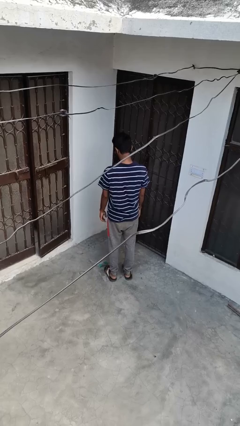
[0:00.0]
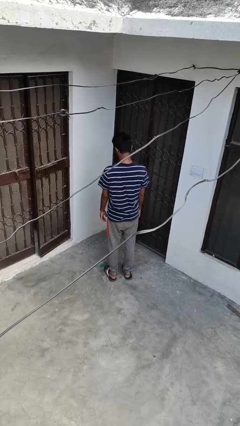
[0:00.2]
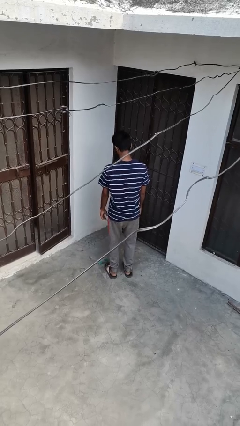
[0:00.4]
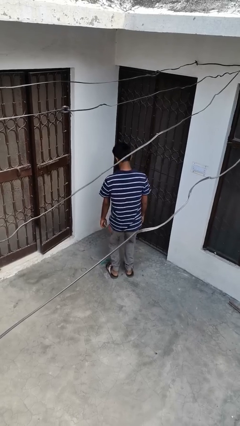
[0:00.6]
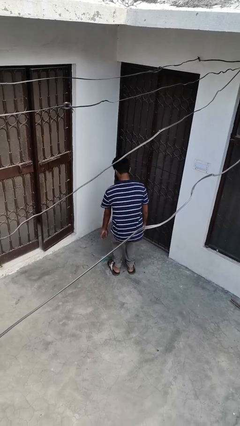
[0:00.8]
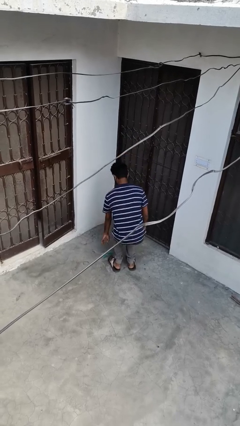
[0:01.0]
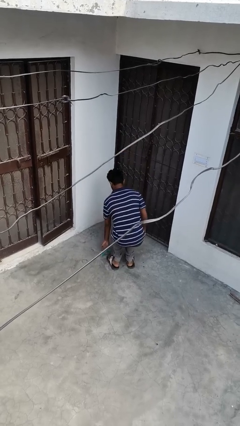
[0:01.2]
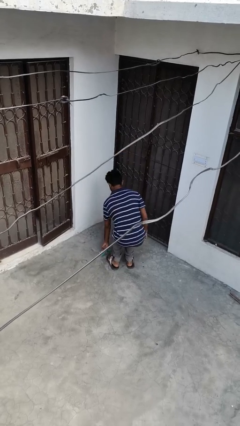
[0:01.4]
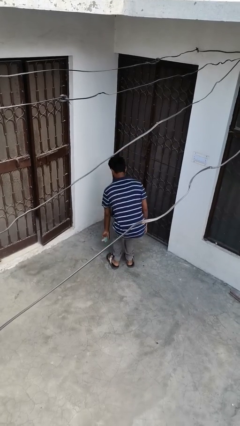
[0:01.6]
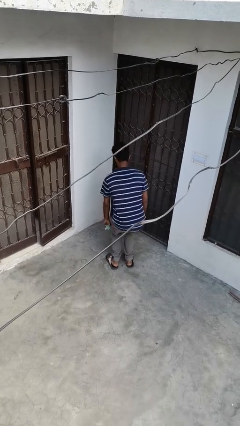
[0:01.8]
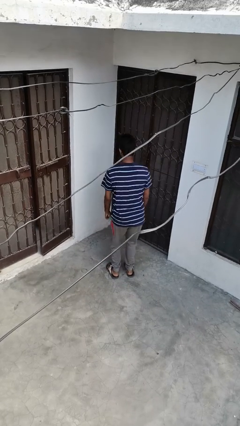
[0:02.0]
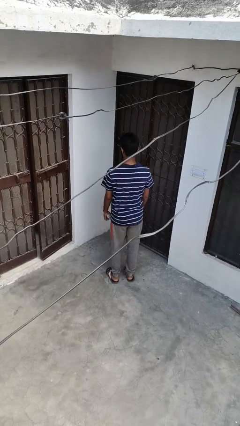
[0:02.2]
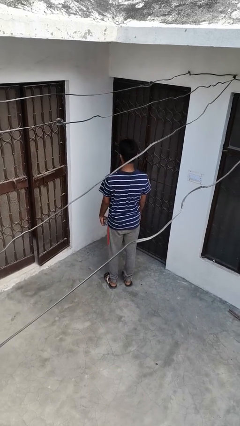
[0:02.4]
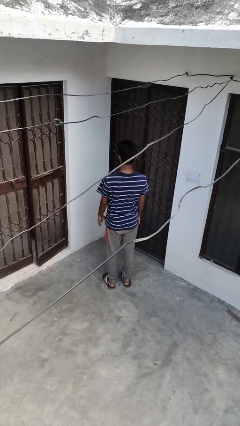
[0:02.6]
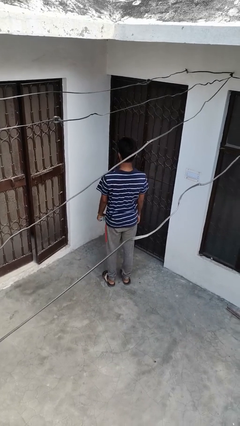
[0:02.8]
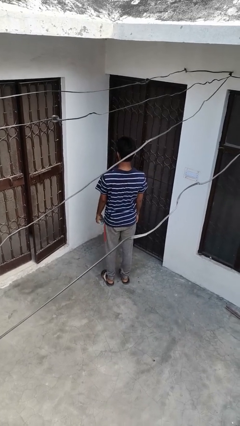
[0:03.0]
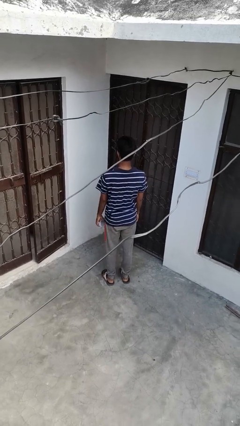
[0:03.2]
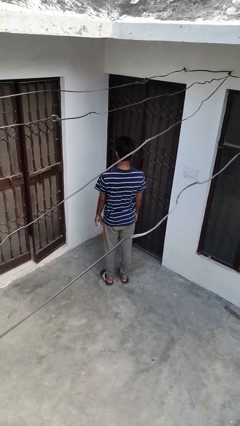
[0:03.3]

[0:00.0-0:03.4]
person picks up object from floor

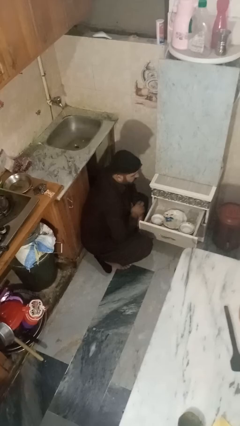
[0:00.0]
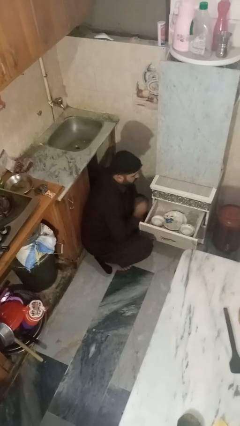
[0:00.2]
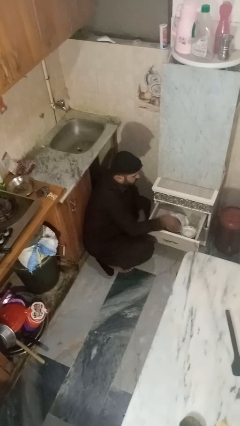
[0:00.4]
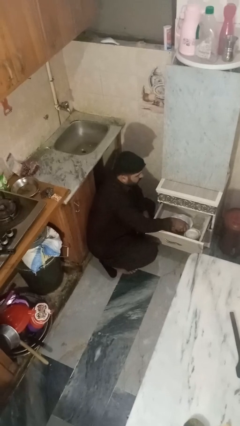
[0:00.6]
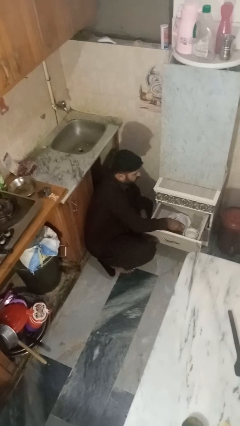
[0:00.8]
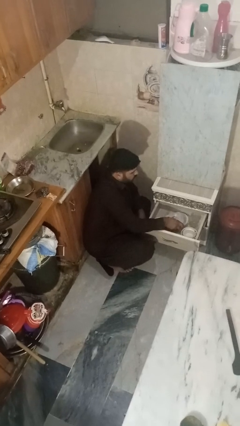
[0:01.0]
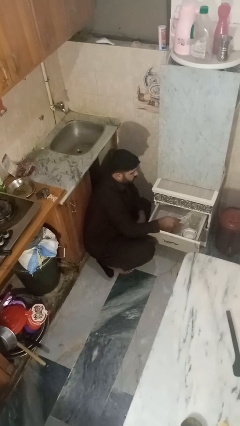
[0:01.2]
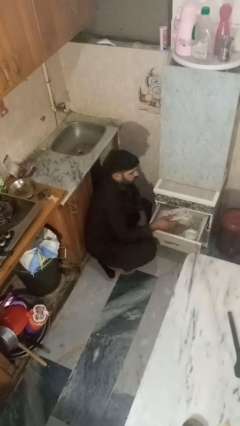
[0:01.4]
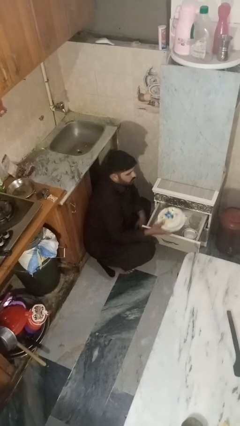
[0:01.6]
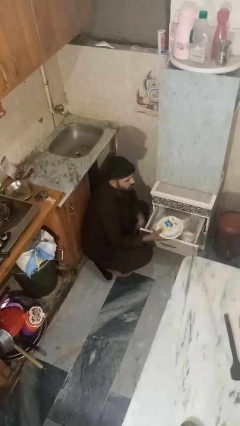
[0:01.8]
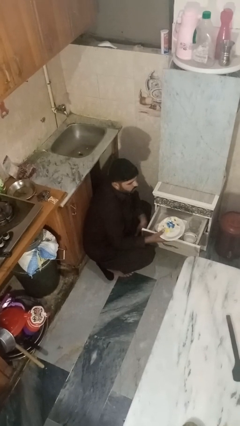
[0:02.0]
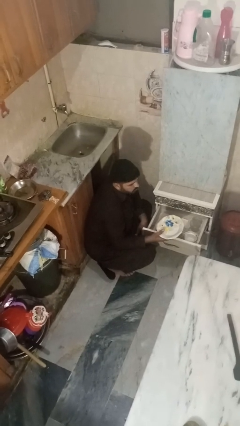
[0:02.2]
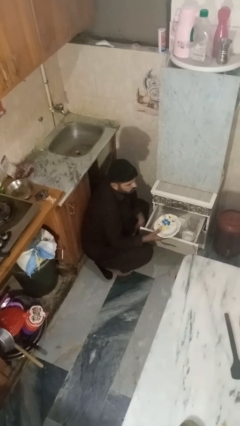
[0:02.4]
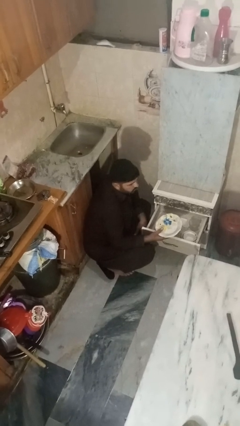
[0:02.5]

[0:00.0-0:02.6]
person takes object from kitchen drawer

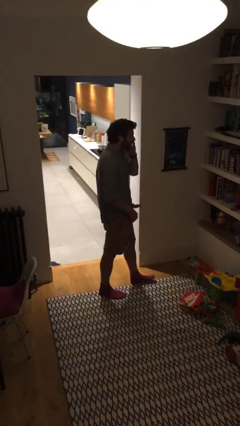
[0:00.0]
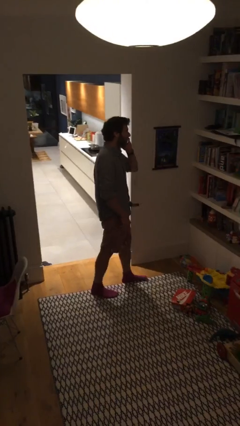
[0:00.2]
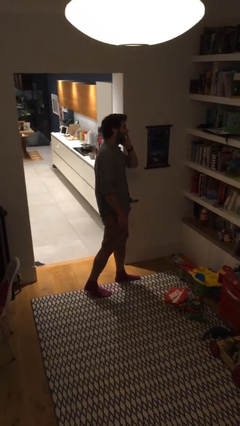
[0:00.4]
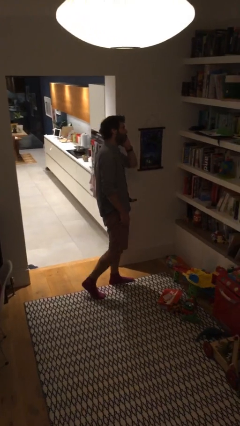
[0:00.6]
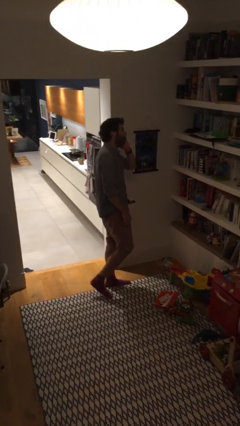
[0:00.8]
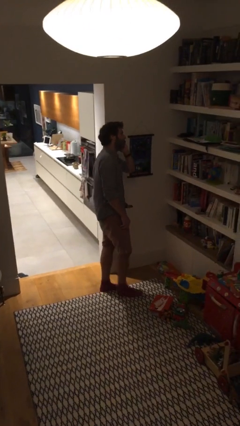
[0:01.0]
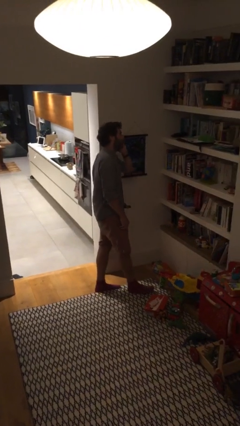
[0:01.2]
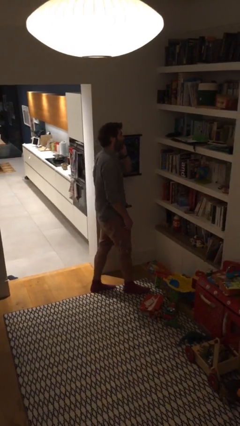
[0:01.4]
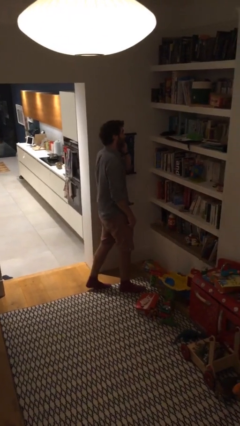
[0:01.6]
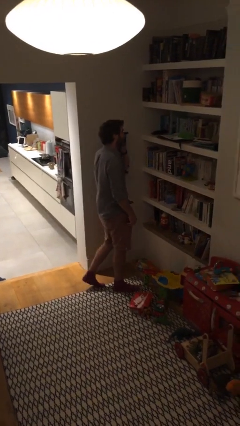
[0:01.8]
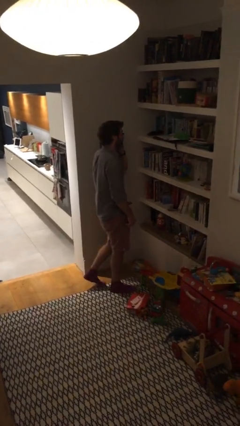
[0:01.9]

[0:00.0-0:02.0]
person talks on phone

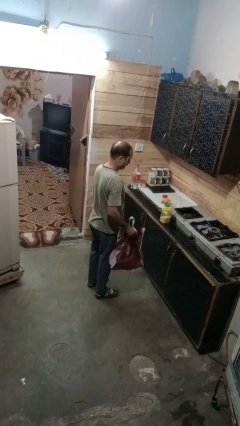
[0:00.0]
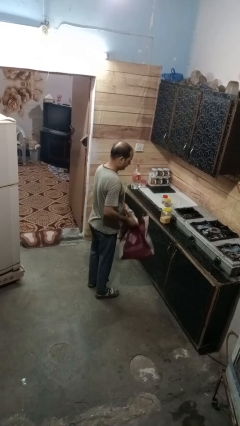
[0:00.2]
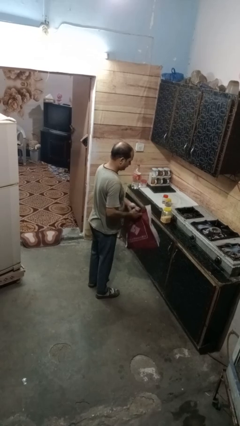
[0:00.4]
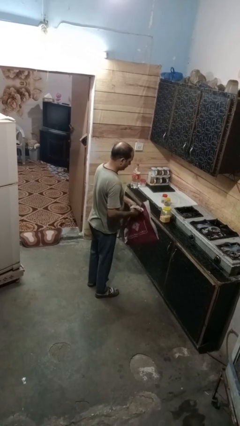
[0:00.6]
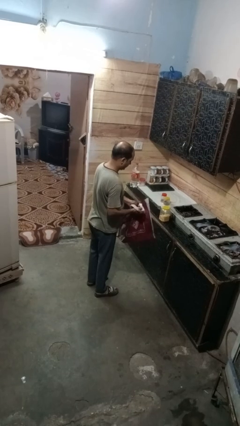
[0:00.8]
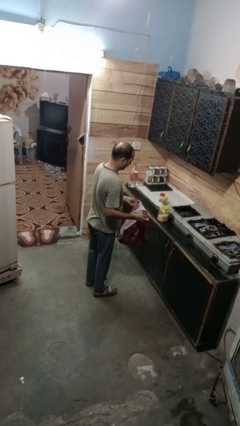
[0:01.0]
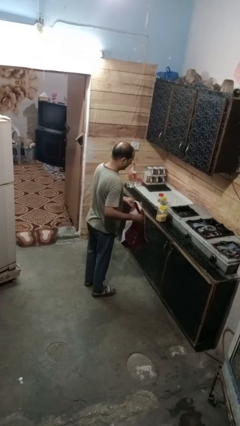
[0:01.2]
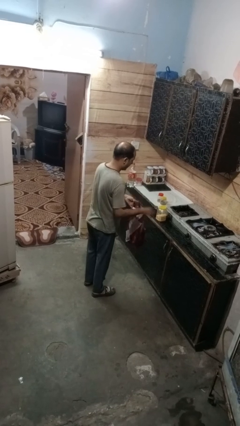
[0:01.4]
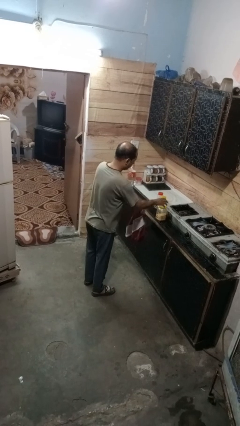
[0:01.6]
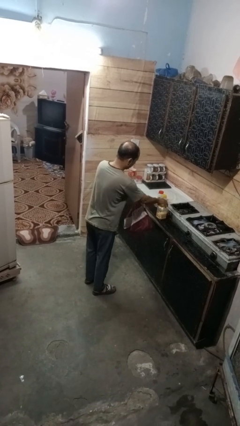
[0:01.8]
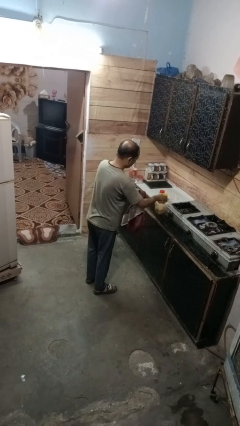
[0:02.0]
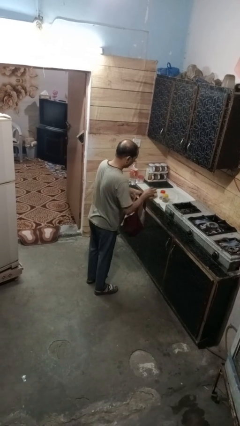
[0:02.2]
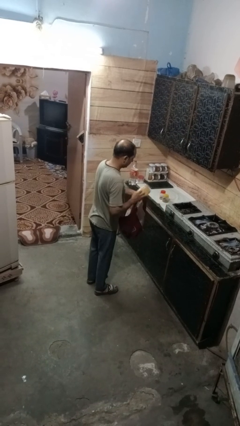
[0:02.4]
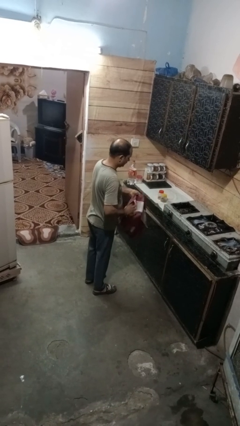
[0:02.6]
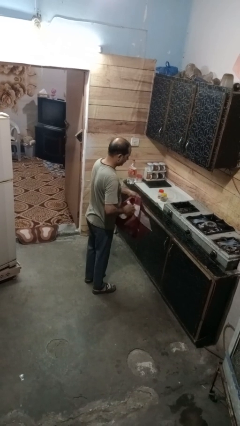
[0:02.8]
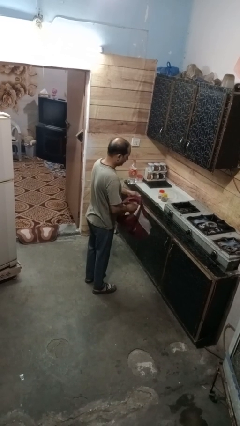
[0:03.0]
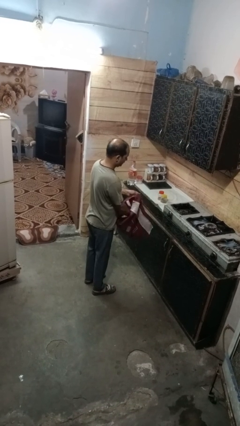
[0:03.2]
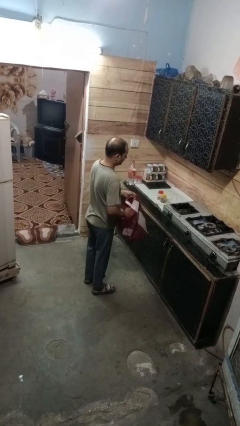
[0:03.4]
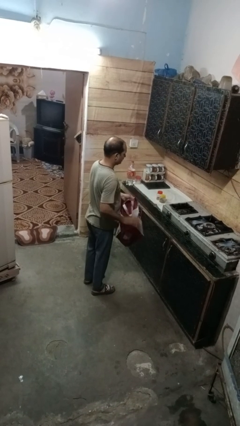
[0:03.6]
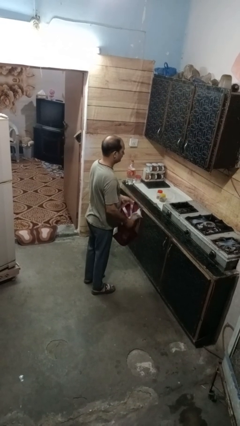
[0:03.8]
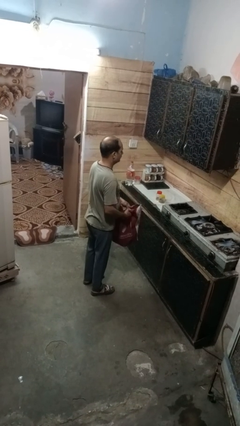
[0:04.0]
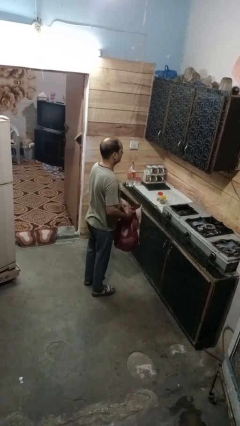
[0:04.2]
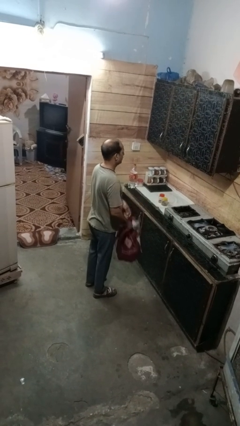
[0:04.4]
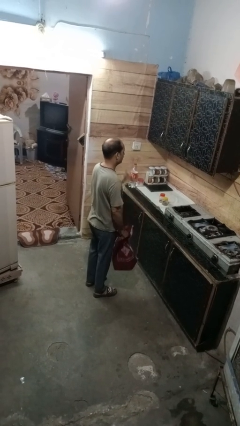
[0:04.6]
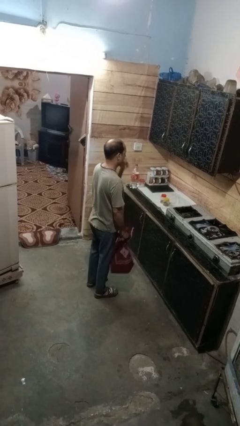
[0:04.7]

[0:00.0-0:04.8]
person puts object into bag

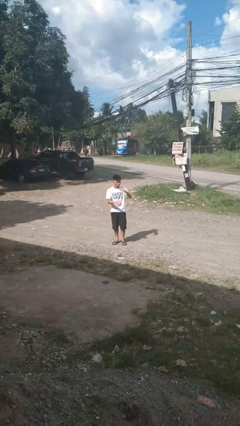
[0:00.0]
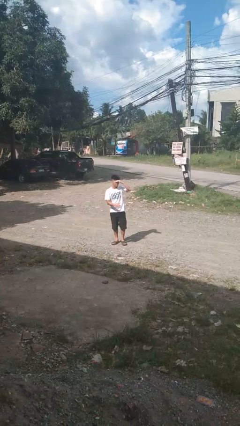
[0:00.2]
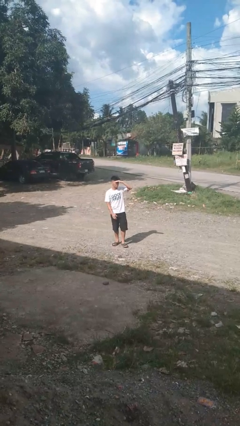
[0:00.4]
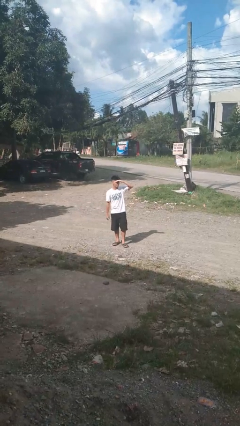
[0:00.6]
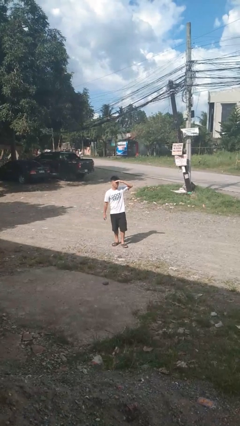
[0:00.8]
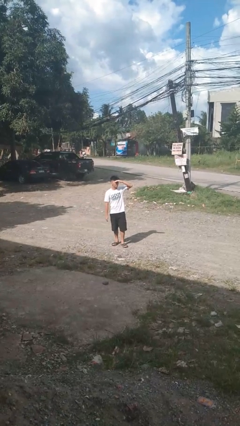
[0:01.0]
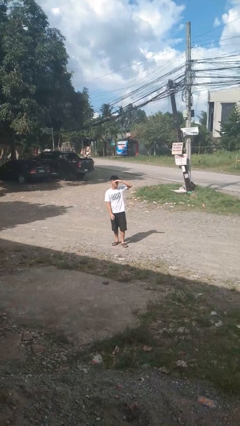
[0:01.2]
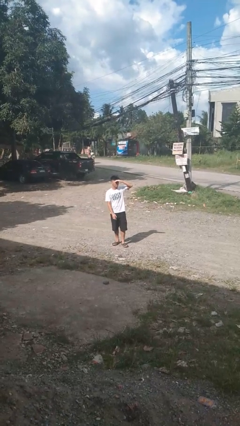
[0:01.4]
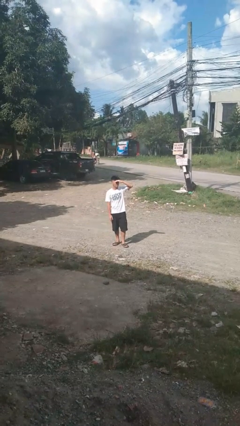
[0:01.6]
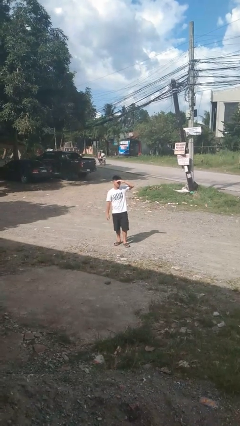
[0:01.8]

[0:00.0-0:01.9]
person shades eyes

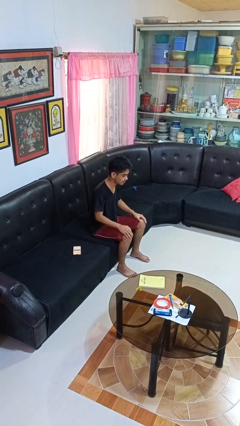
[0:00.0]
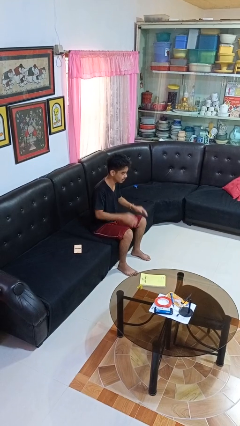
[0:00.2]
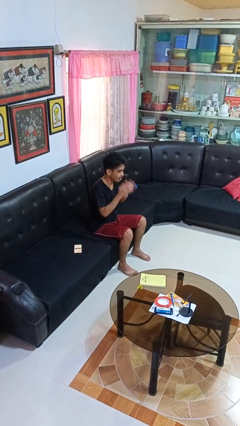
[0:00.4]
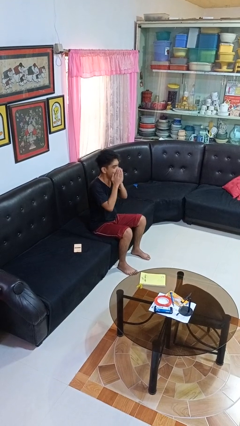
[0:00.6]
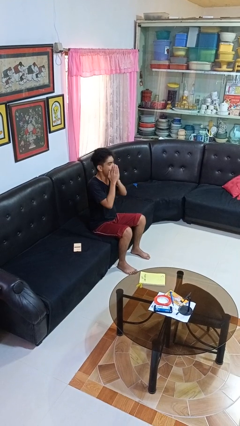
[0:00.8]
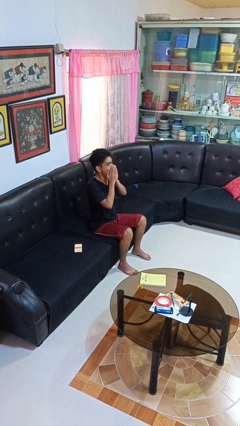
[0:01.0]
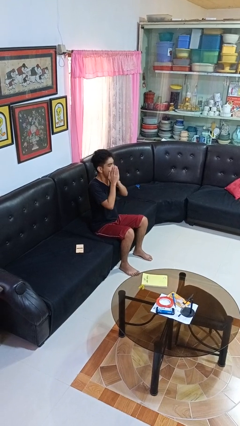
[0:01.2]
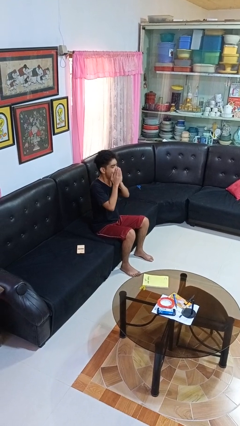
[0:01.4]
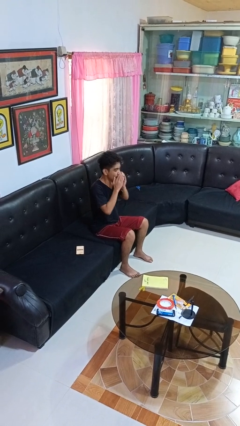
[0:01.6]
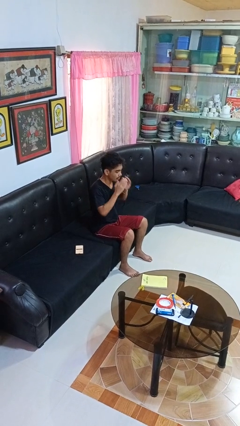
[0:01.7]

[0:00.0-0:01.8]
person yawns

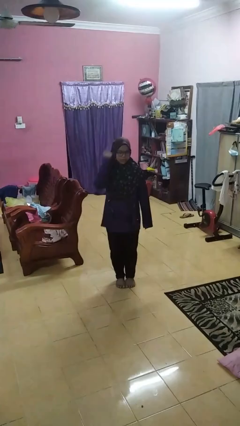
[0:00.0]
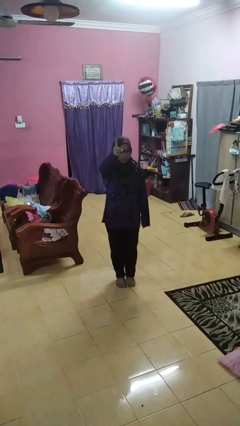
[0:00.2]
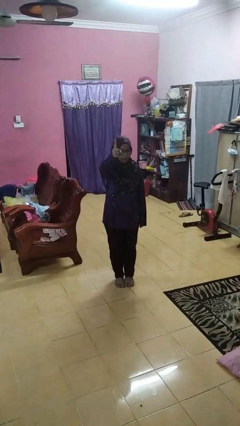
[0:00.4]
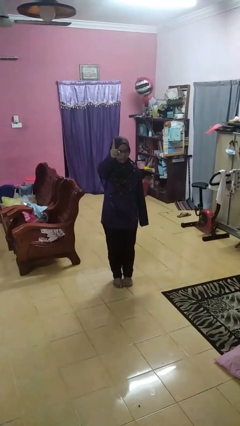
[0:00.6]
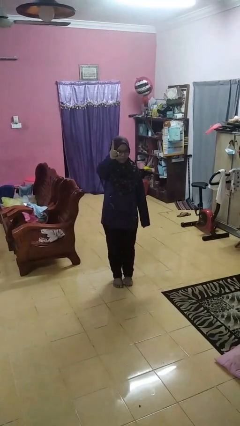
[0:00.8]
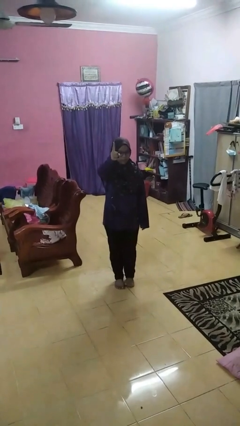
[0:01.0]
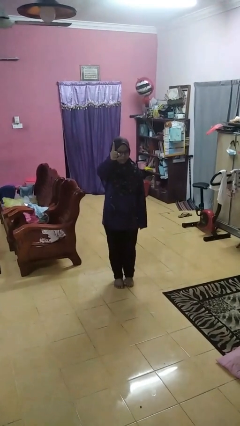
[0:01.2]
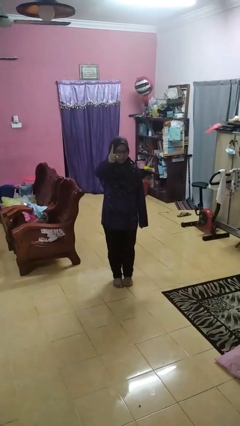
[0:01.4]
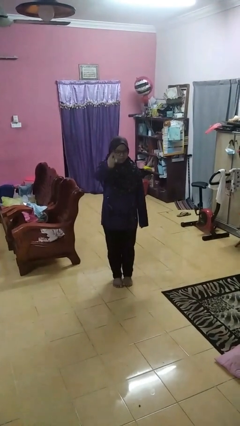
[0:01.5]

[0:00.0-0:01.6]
person gestures number one
